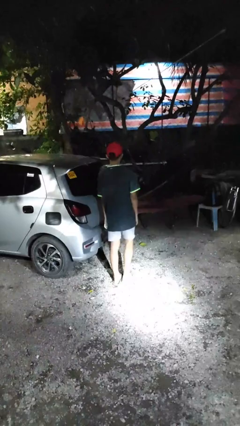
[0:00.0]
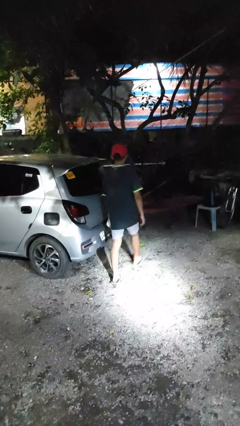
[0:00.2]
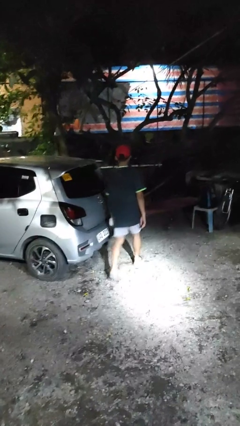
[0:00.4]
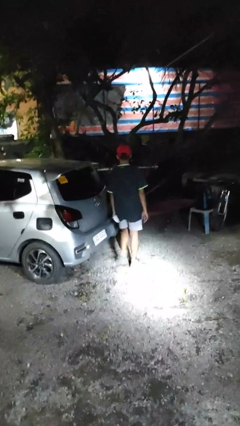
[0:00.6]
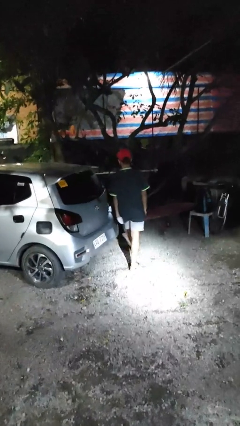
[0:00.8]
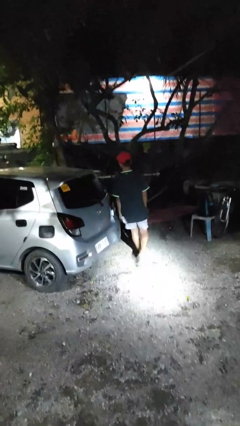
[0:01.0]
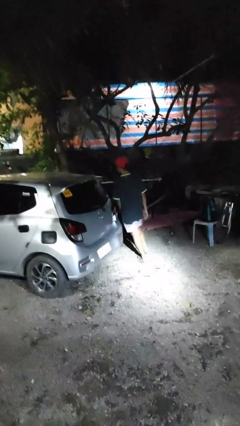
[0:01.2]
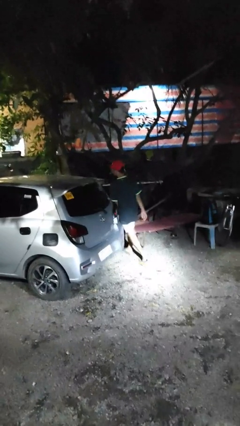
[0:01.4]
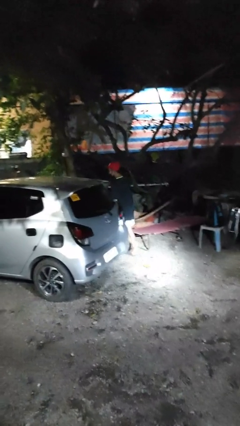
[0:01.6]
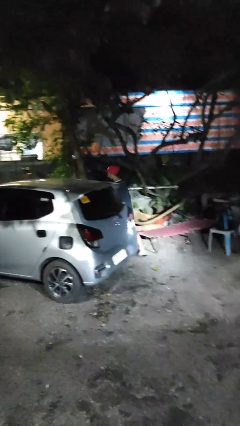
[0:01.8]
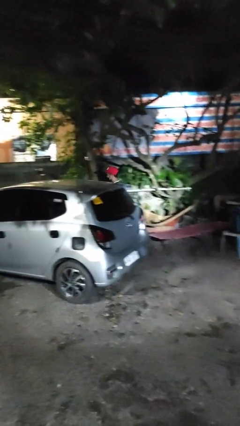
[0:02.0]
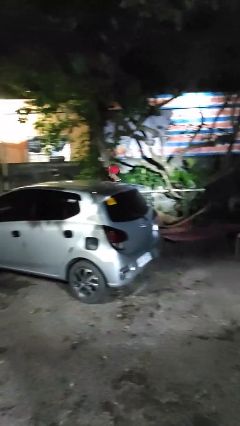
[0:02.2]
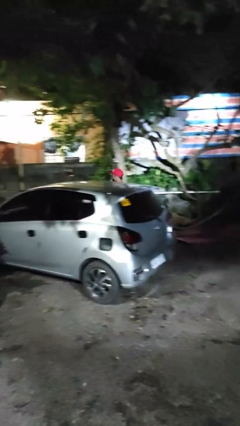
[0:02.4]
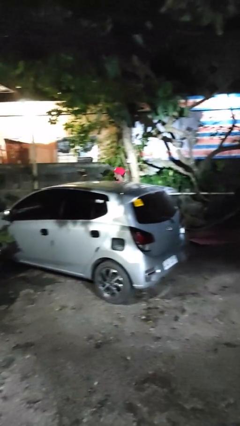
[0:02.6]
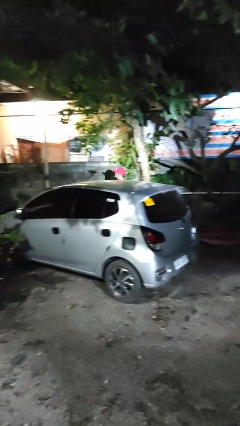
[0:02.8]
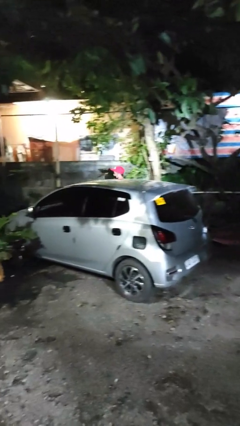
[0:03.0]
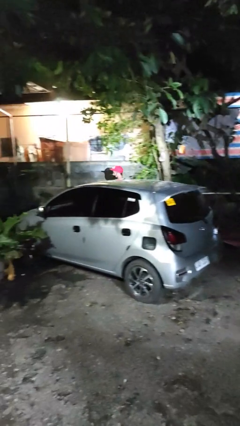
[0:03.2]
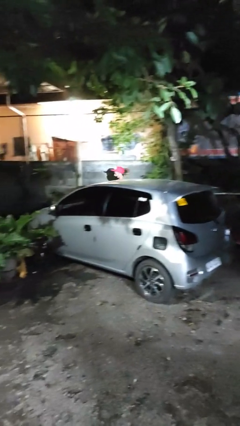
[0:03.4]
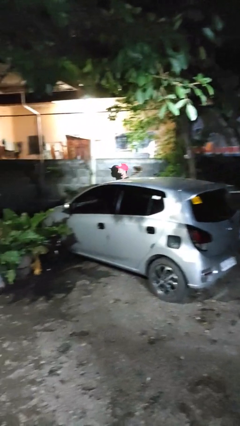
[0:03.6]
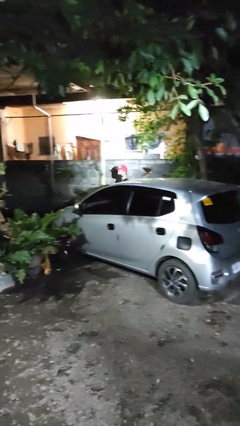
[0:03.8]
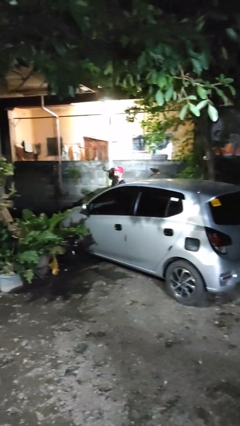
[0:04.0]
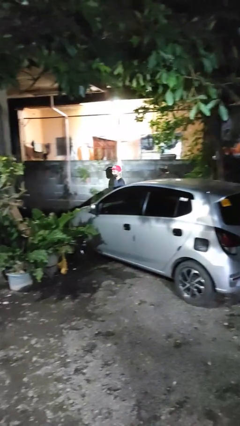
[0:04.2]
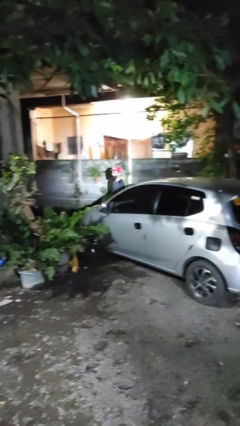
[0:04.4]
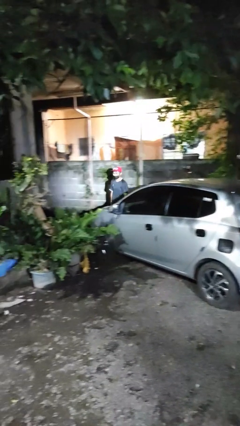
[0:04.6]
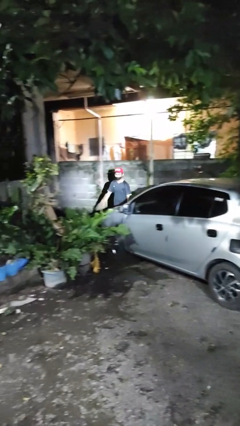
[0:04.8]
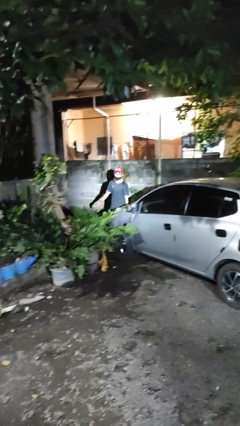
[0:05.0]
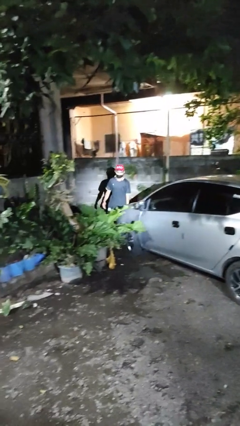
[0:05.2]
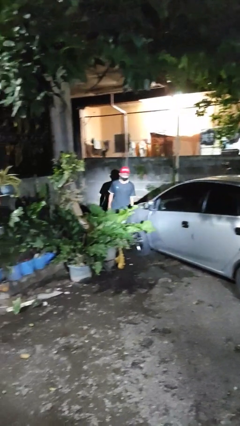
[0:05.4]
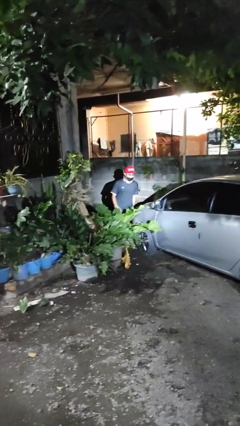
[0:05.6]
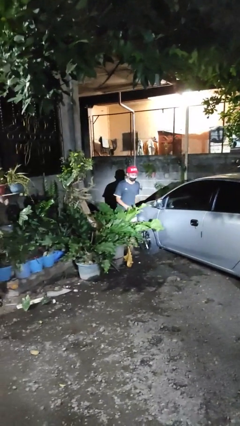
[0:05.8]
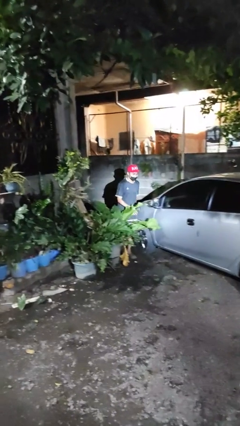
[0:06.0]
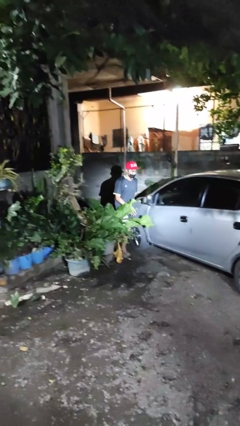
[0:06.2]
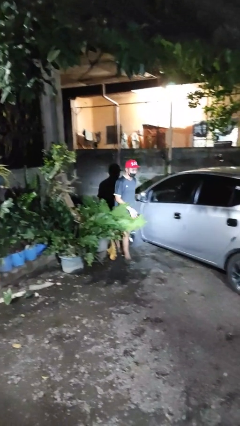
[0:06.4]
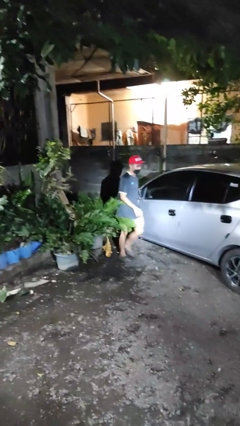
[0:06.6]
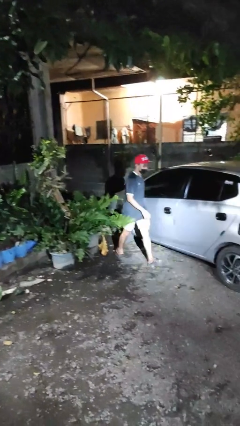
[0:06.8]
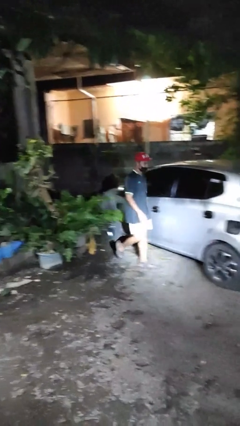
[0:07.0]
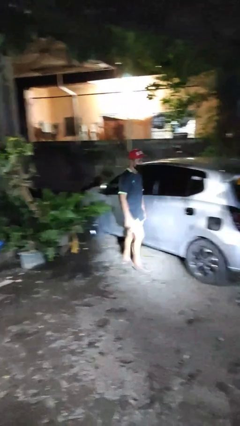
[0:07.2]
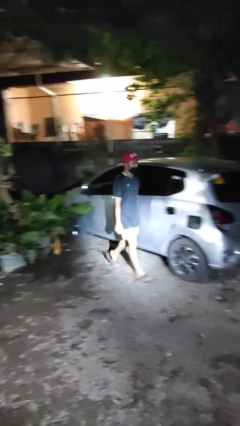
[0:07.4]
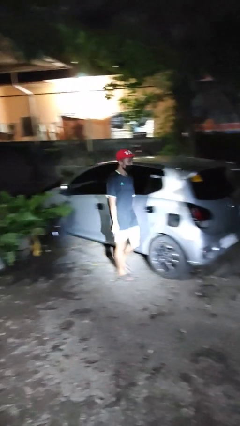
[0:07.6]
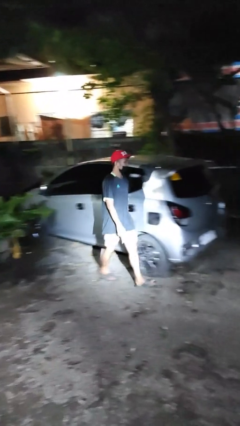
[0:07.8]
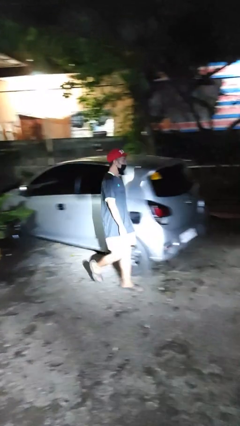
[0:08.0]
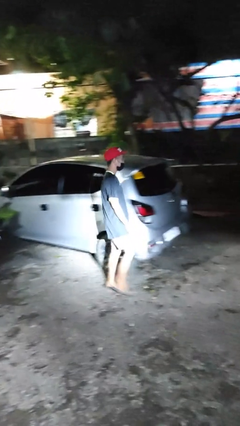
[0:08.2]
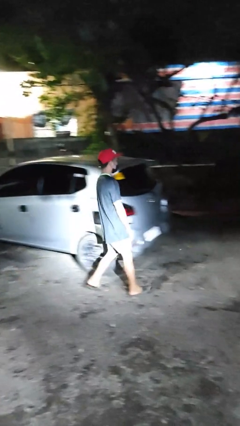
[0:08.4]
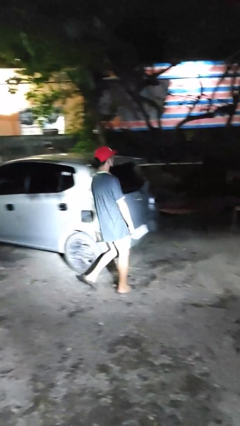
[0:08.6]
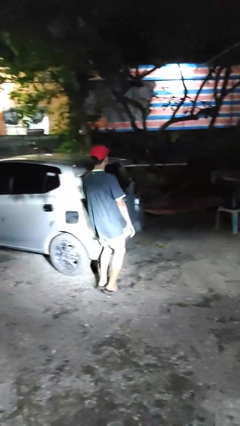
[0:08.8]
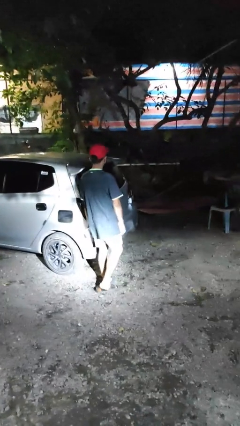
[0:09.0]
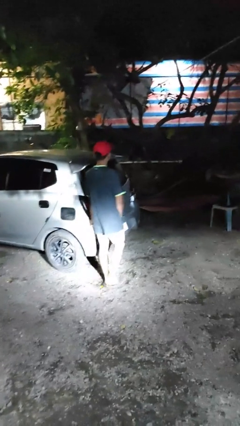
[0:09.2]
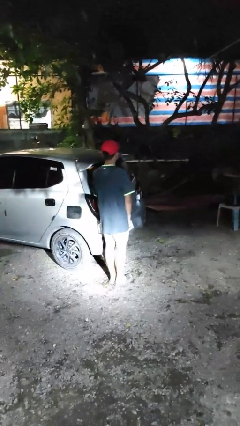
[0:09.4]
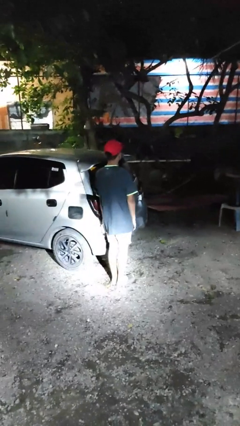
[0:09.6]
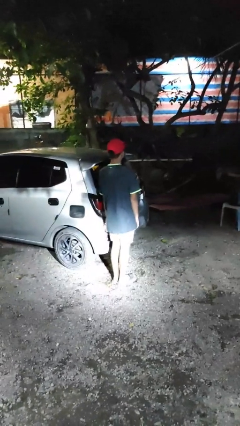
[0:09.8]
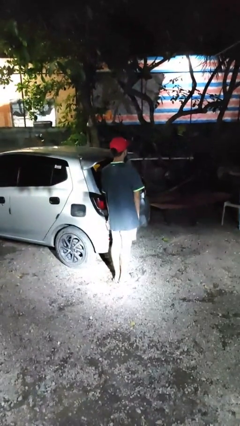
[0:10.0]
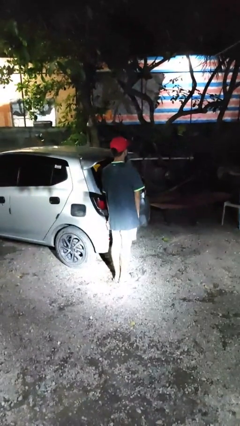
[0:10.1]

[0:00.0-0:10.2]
person walks around car

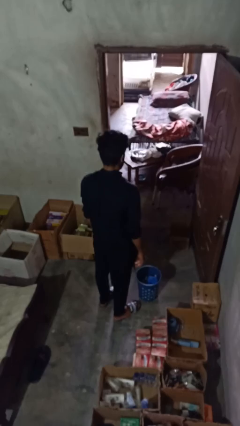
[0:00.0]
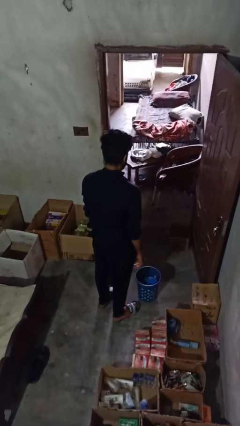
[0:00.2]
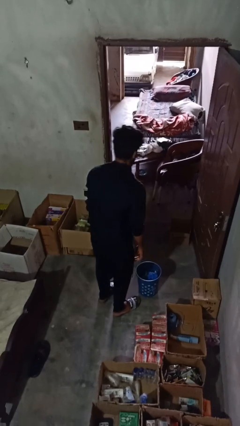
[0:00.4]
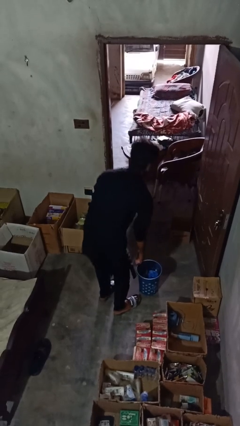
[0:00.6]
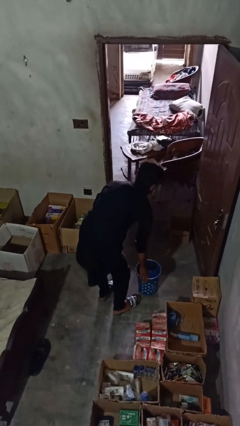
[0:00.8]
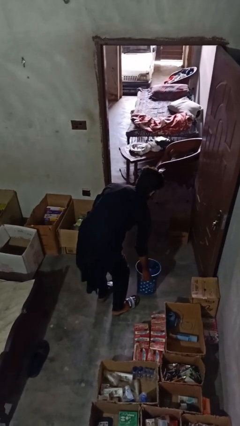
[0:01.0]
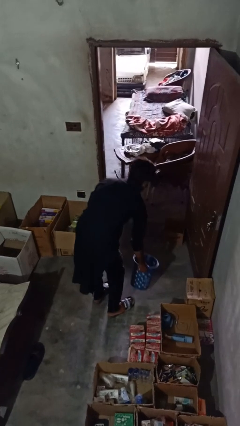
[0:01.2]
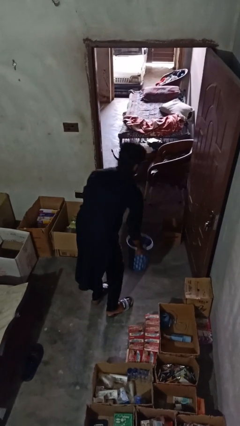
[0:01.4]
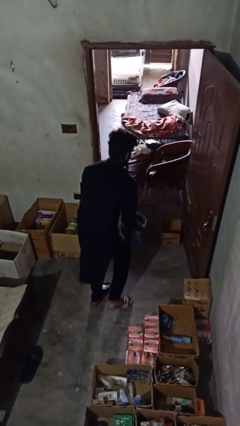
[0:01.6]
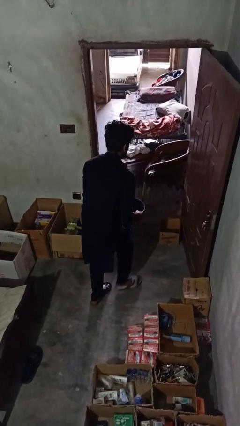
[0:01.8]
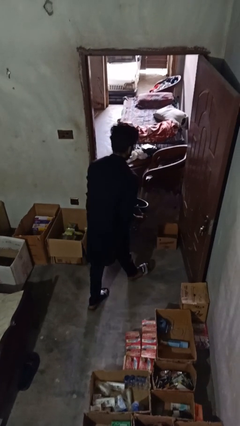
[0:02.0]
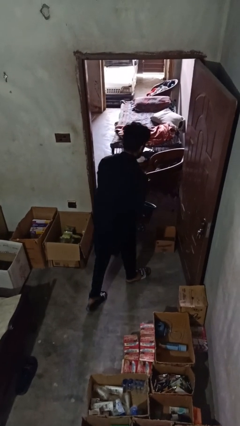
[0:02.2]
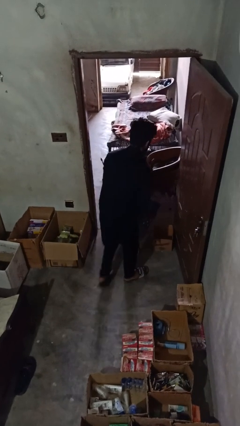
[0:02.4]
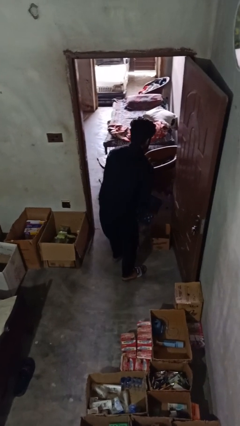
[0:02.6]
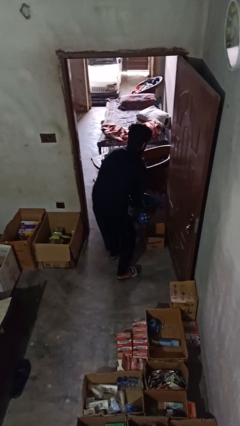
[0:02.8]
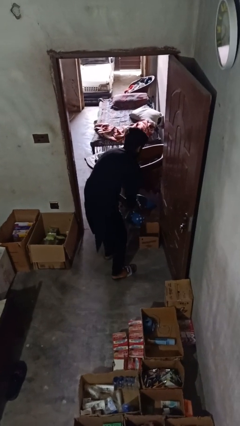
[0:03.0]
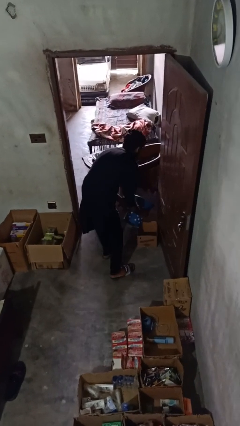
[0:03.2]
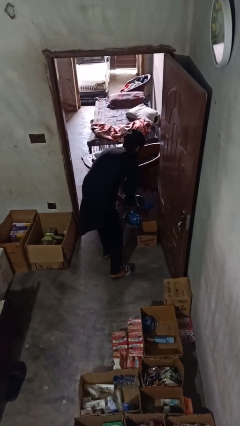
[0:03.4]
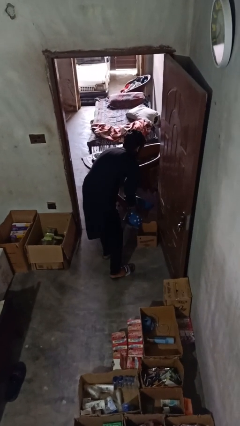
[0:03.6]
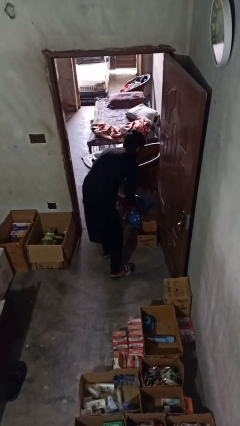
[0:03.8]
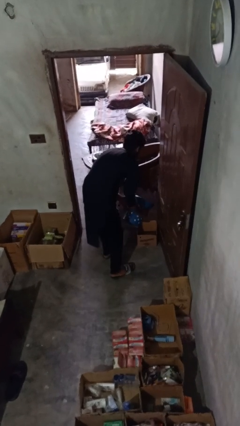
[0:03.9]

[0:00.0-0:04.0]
person removes trashbag from trashcan

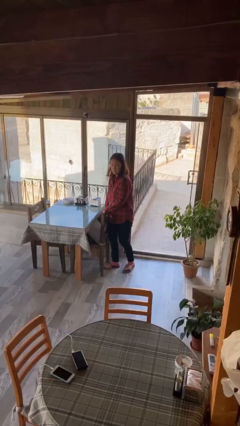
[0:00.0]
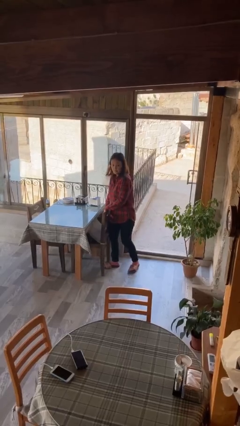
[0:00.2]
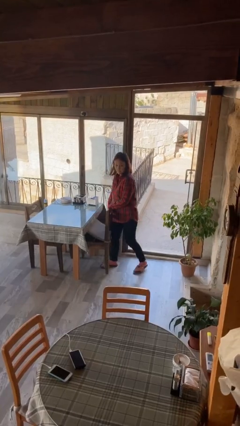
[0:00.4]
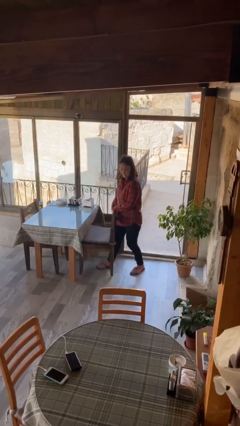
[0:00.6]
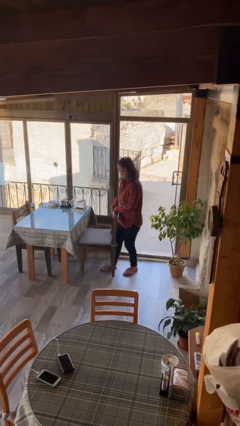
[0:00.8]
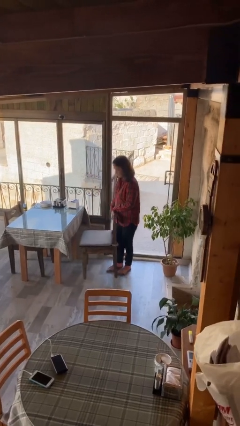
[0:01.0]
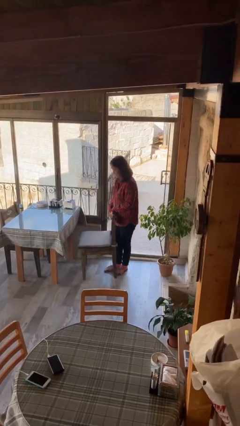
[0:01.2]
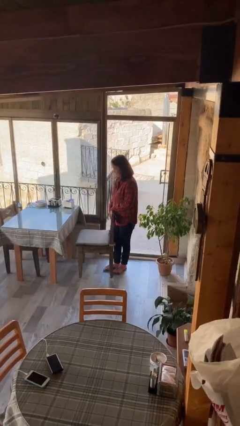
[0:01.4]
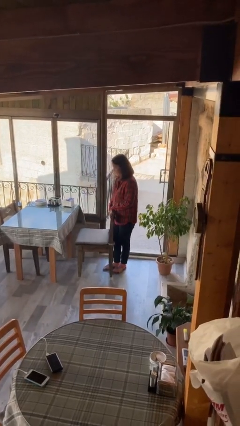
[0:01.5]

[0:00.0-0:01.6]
person pulls out chair

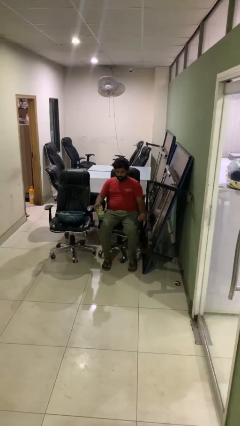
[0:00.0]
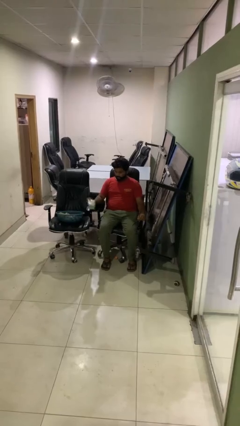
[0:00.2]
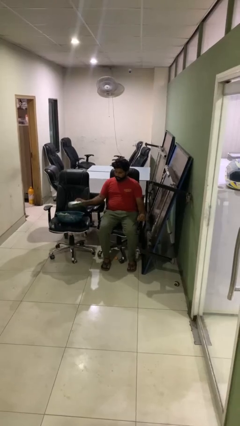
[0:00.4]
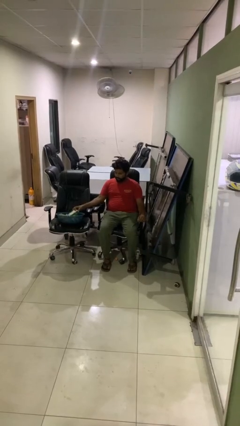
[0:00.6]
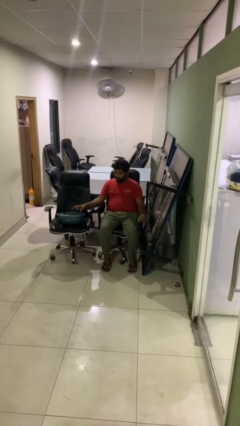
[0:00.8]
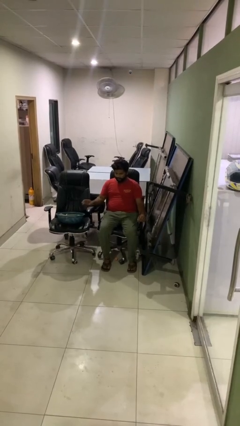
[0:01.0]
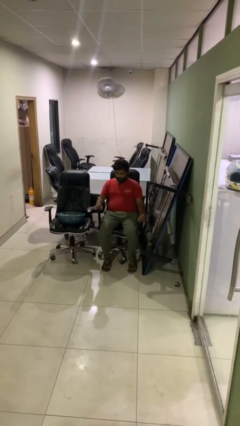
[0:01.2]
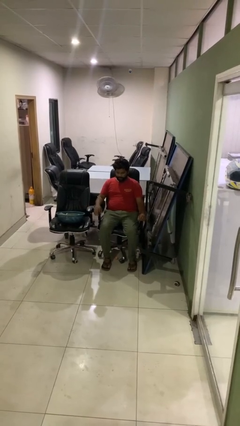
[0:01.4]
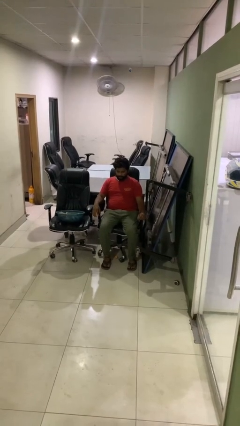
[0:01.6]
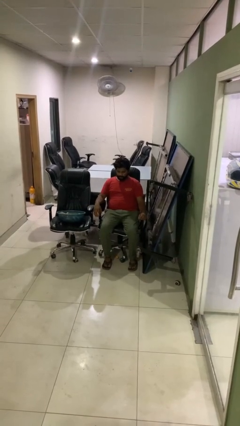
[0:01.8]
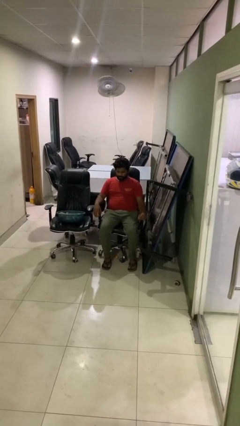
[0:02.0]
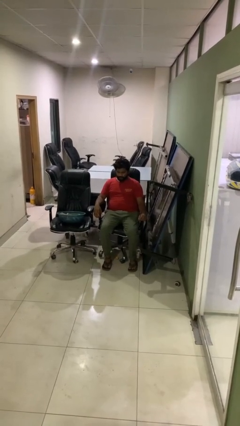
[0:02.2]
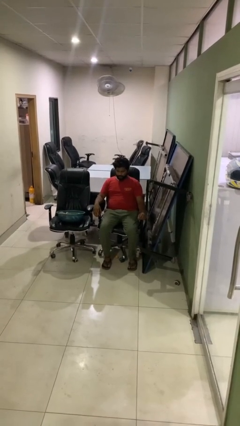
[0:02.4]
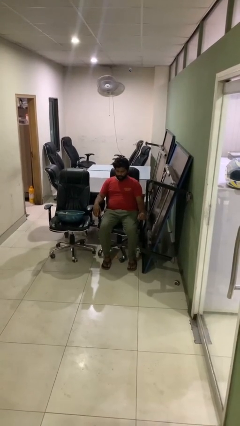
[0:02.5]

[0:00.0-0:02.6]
person puts object into basket
